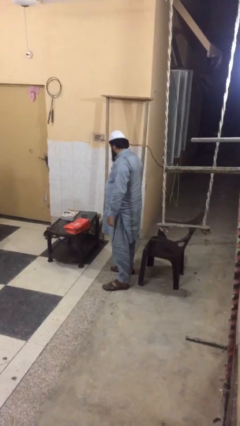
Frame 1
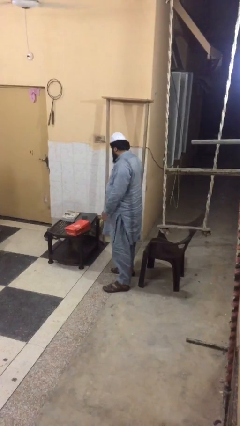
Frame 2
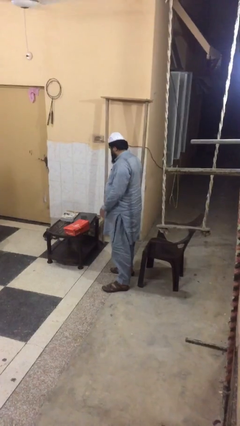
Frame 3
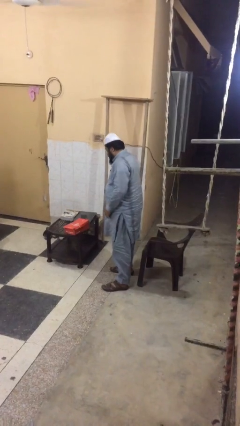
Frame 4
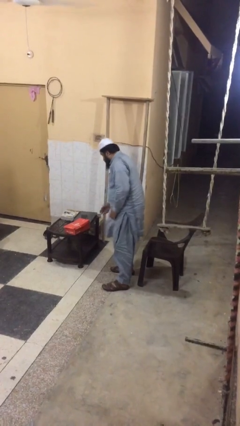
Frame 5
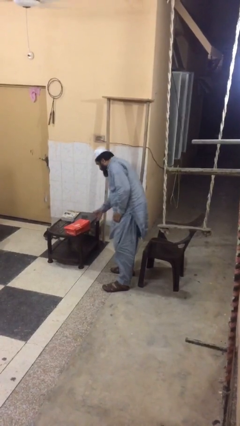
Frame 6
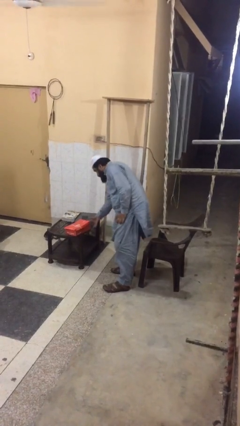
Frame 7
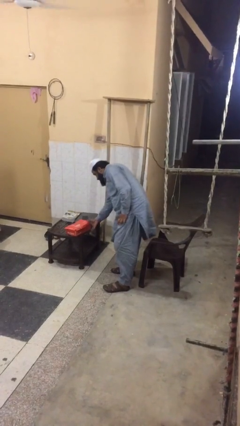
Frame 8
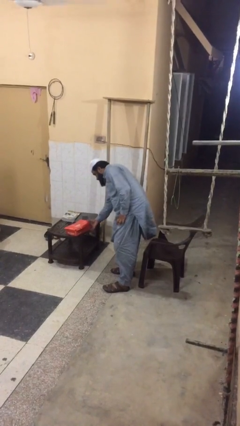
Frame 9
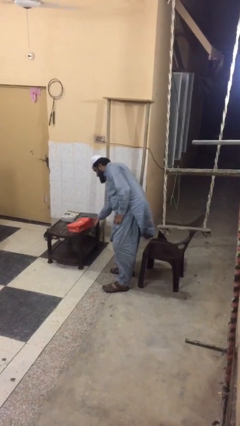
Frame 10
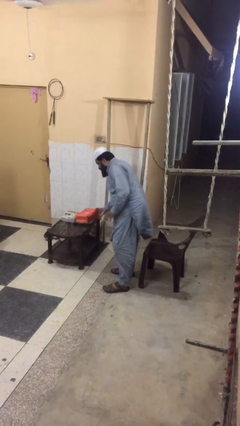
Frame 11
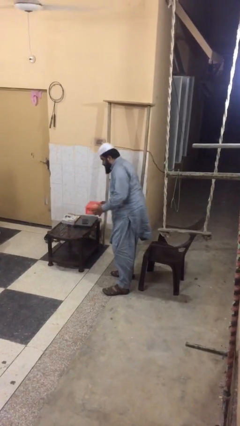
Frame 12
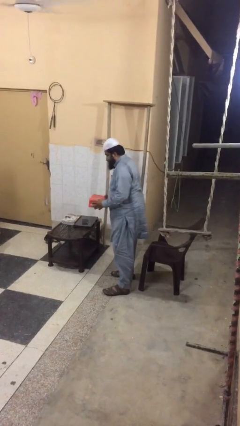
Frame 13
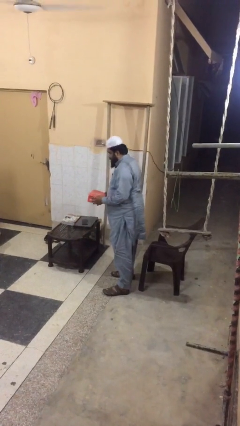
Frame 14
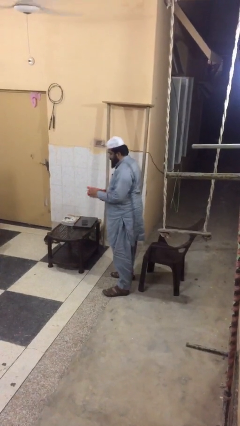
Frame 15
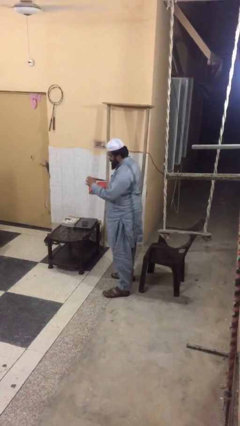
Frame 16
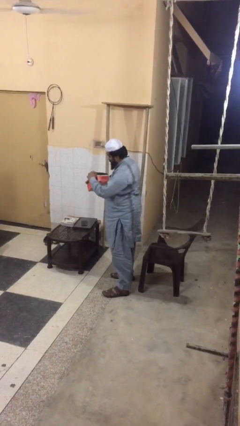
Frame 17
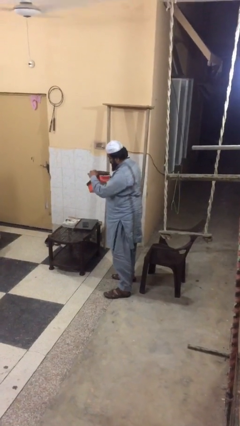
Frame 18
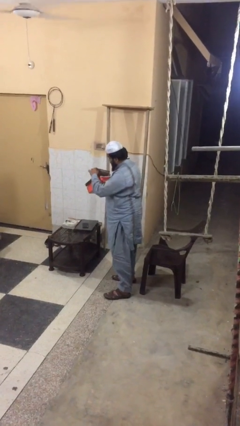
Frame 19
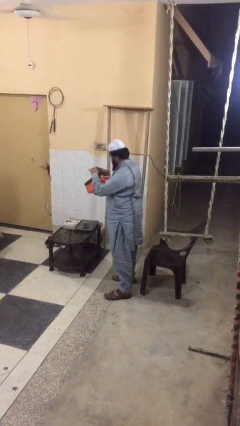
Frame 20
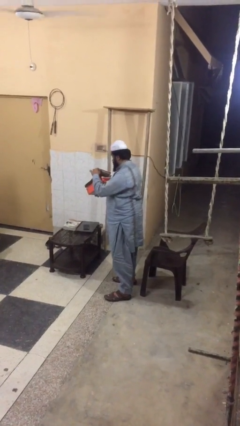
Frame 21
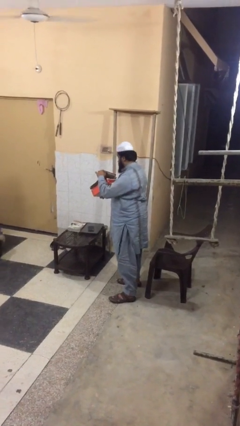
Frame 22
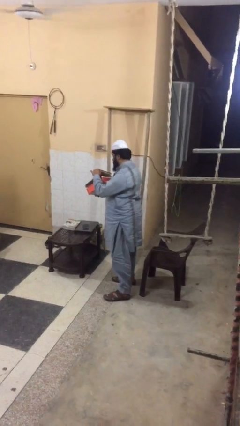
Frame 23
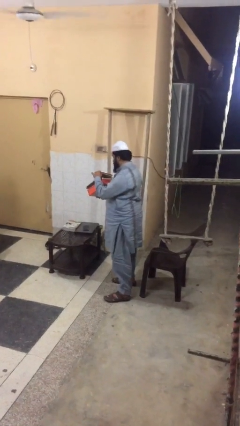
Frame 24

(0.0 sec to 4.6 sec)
person picks up object from table

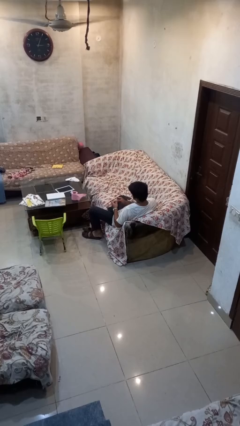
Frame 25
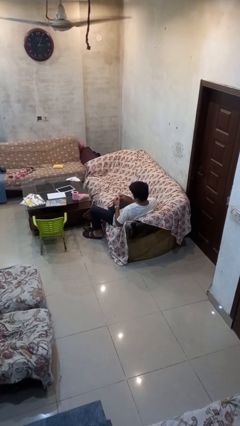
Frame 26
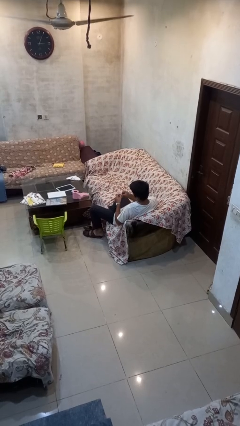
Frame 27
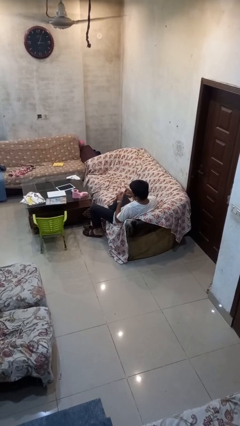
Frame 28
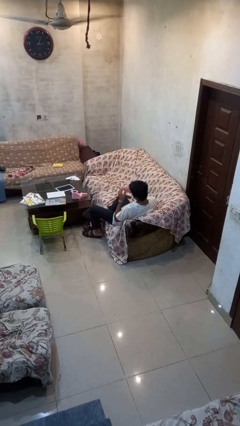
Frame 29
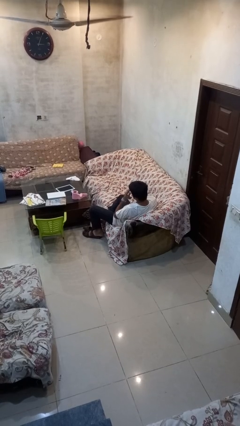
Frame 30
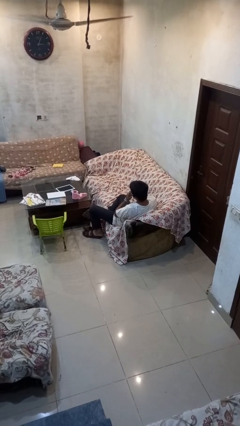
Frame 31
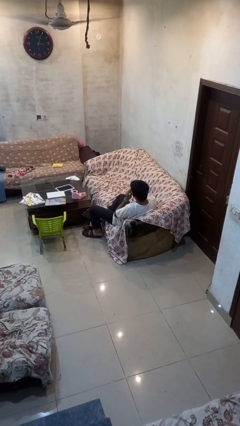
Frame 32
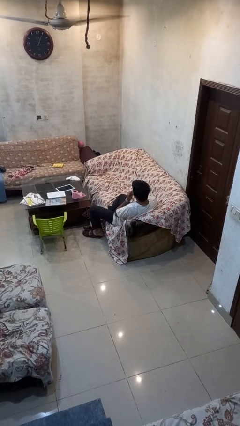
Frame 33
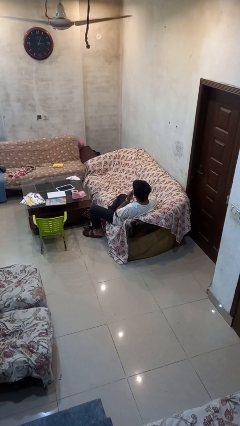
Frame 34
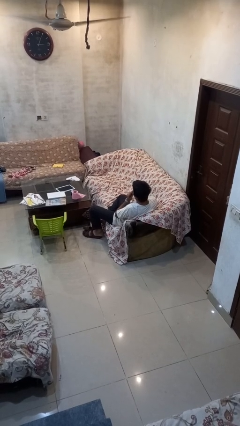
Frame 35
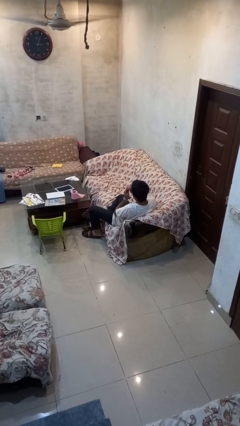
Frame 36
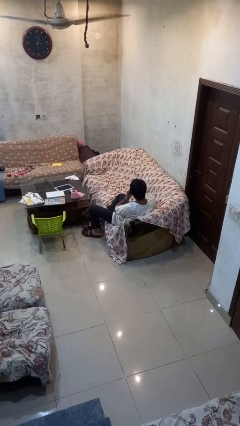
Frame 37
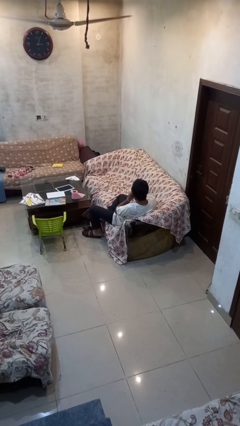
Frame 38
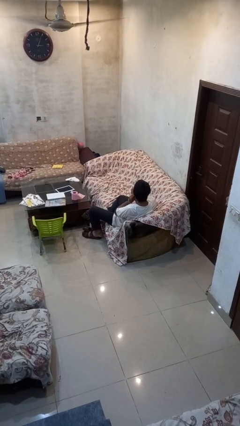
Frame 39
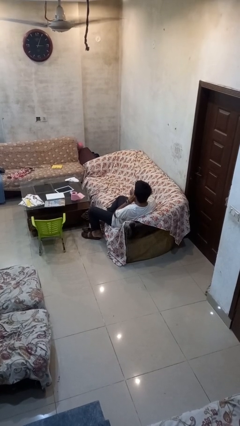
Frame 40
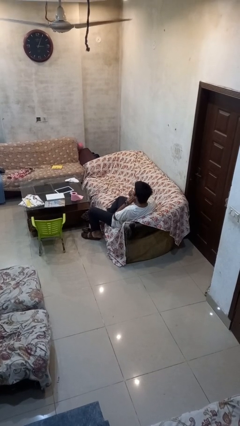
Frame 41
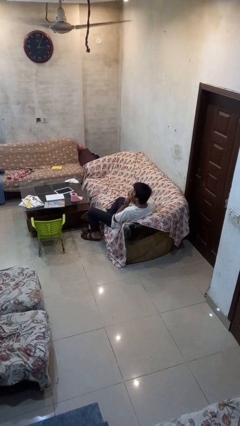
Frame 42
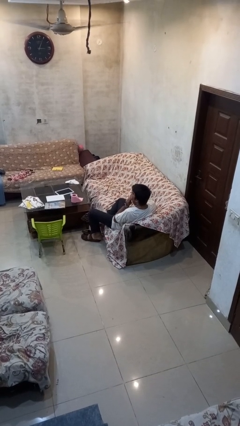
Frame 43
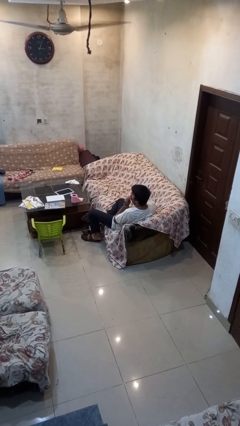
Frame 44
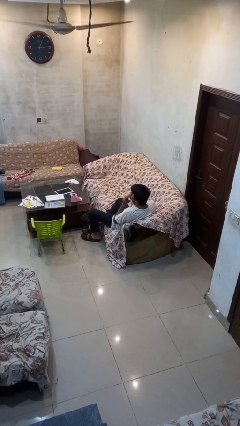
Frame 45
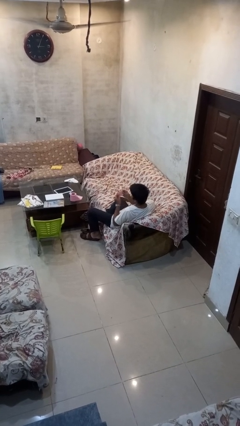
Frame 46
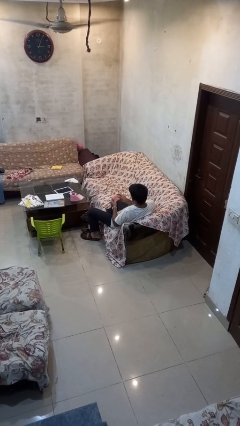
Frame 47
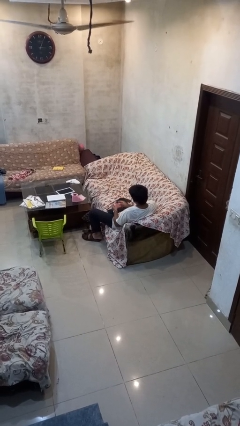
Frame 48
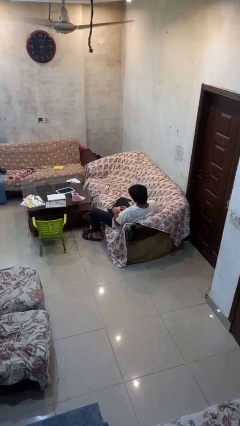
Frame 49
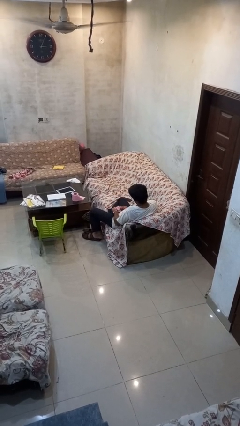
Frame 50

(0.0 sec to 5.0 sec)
person wipes mouth with napkin

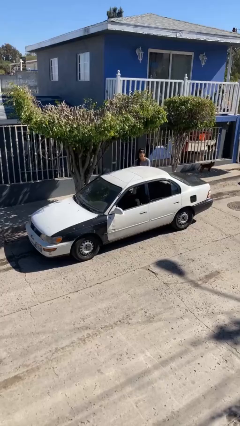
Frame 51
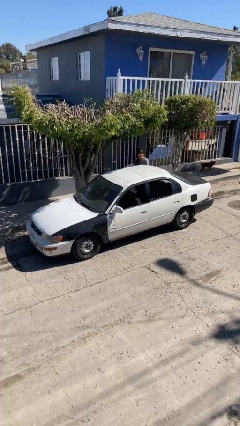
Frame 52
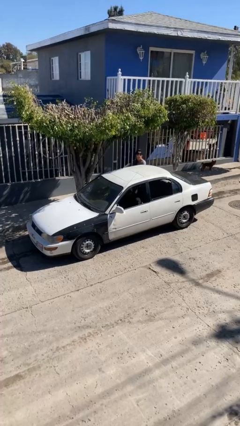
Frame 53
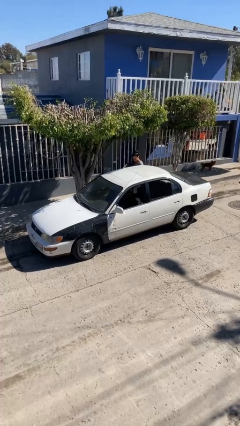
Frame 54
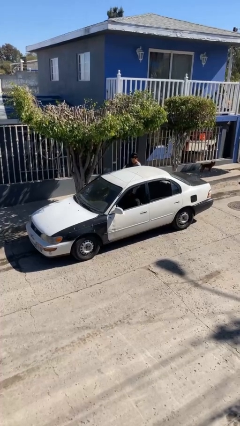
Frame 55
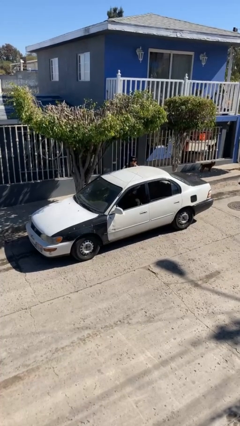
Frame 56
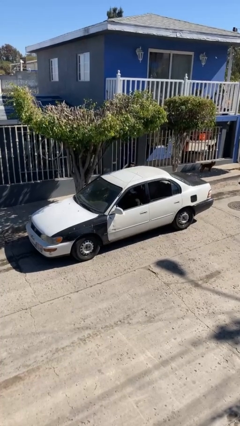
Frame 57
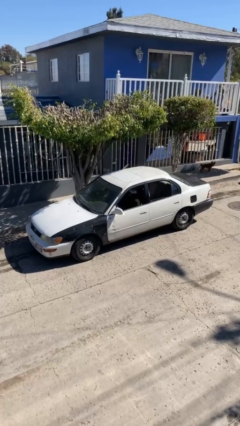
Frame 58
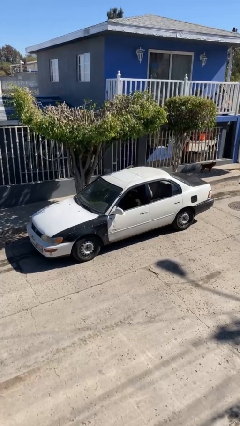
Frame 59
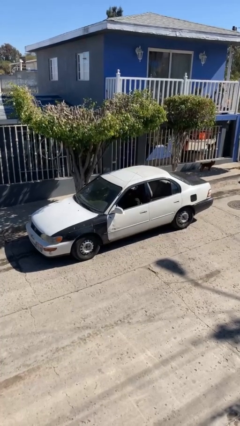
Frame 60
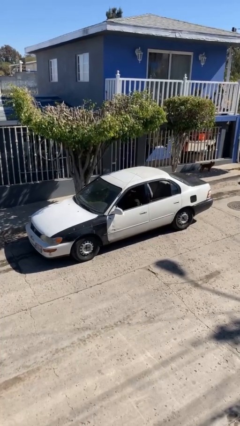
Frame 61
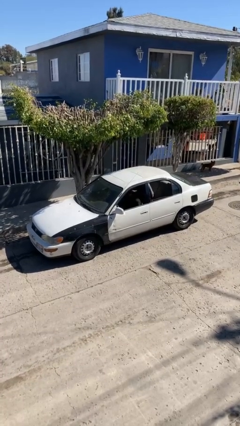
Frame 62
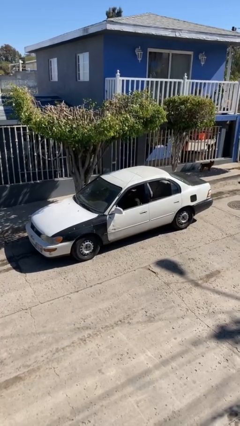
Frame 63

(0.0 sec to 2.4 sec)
car picks up person

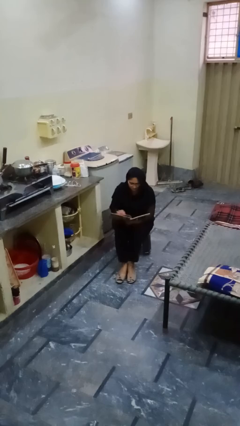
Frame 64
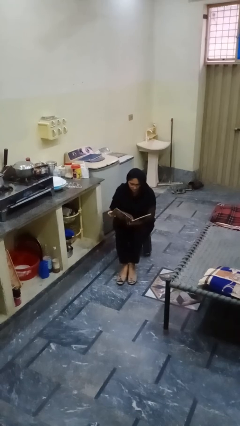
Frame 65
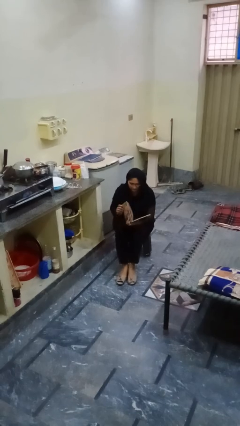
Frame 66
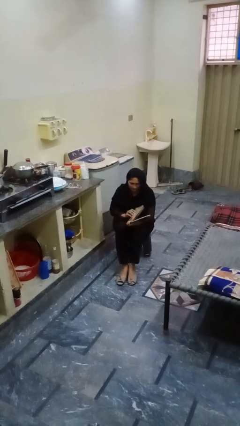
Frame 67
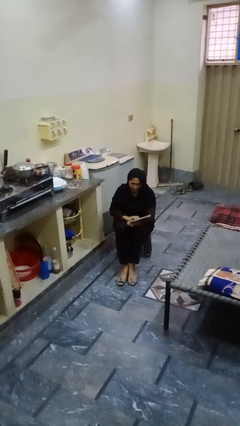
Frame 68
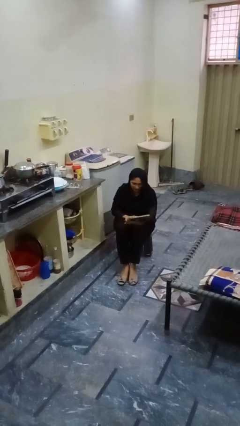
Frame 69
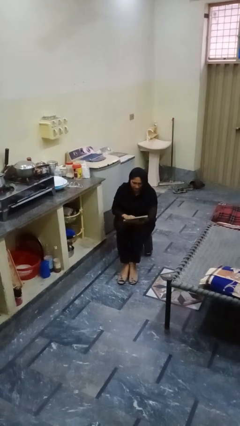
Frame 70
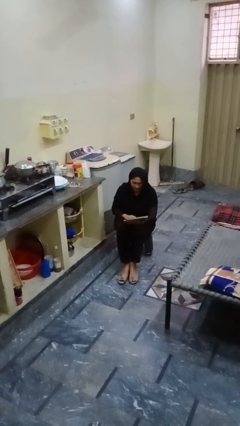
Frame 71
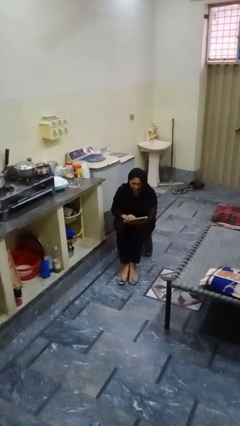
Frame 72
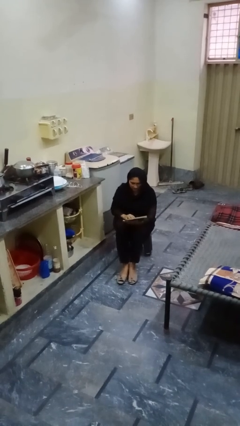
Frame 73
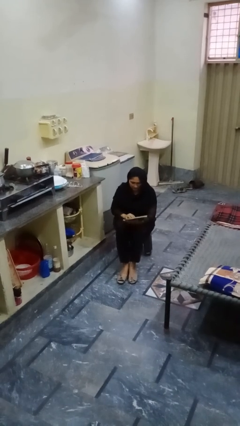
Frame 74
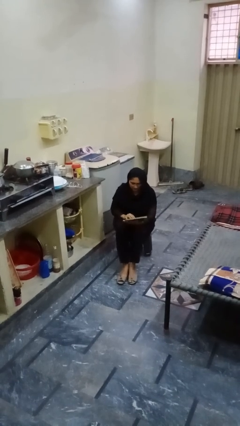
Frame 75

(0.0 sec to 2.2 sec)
person reads book

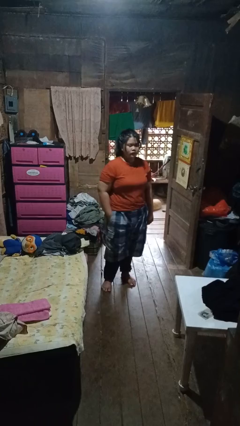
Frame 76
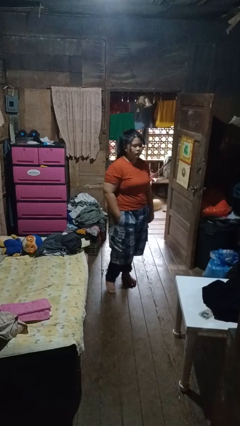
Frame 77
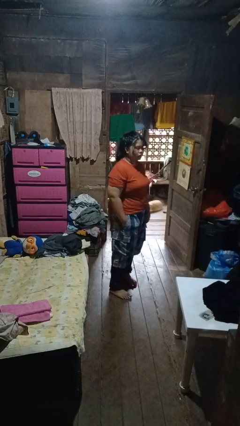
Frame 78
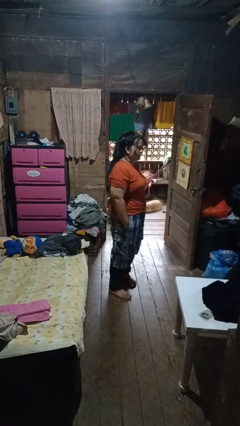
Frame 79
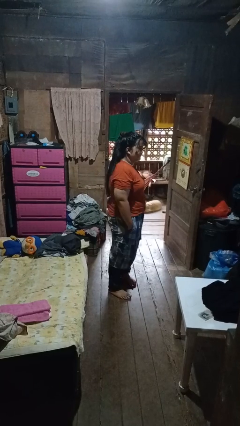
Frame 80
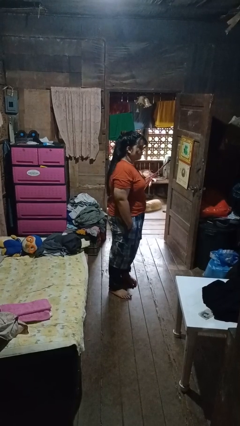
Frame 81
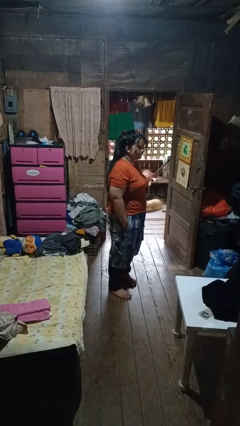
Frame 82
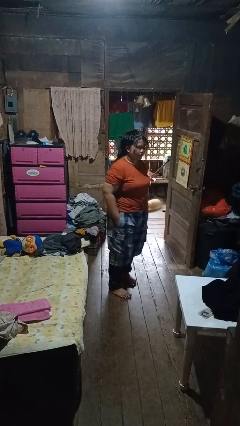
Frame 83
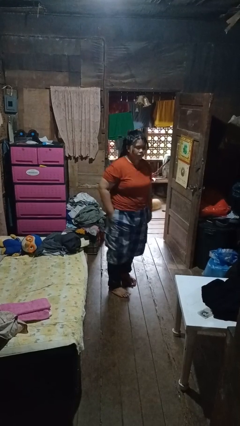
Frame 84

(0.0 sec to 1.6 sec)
person puts hands in back pockets

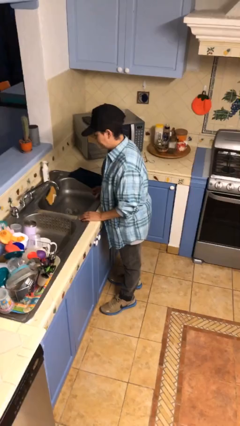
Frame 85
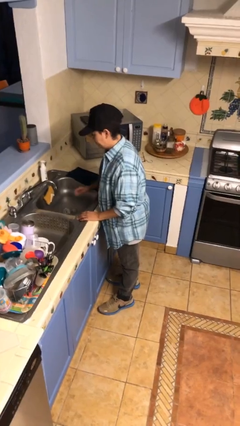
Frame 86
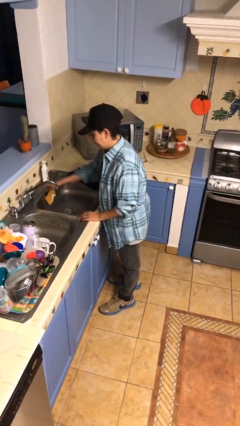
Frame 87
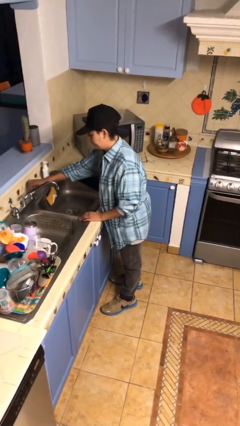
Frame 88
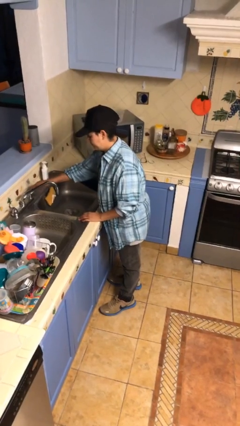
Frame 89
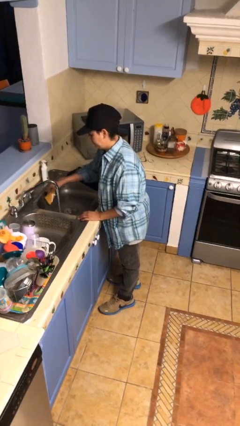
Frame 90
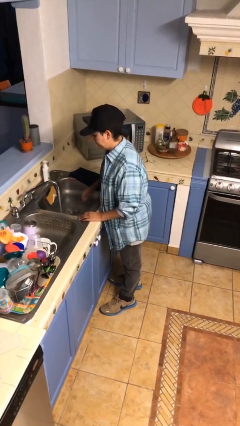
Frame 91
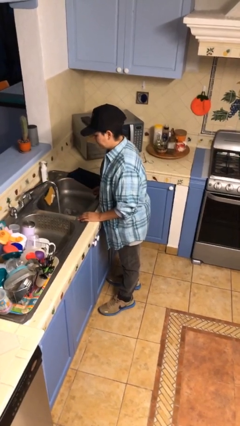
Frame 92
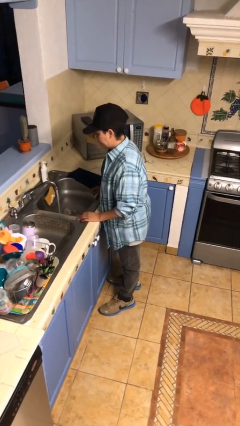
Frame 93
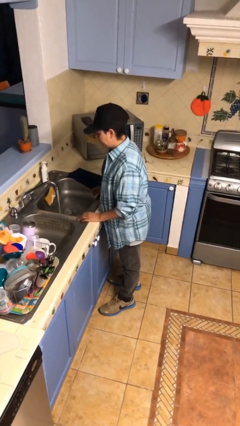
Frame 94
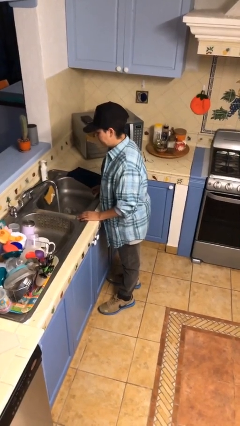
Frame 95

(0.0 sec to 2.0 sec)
person turns on faucet
